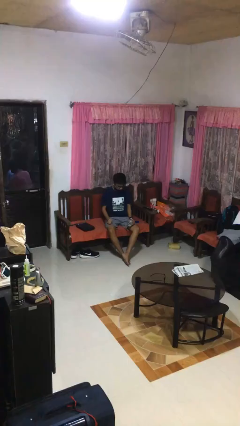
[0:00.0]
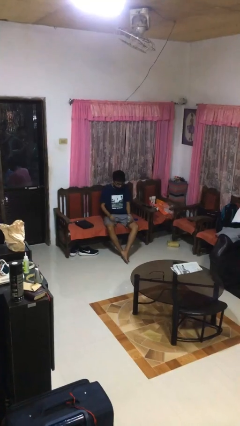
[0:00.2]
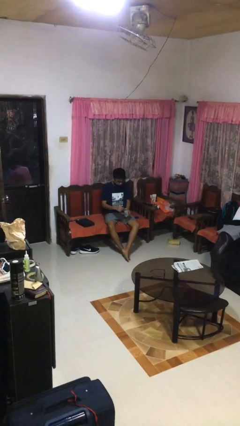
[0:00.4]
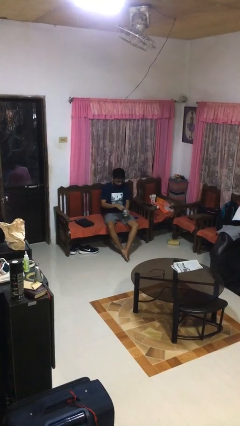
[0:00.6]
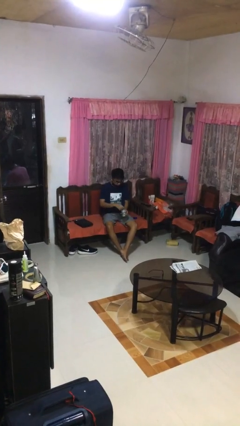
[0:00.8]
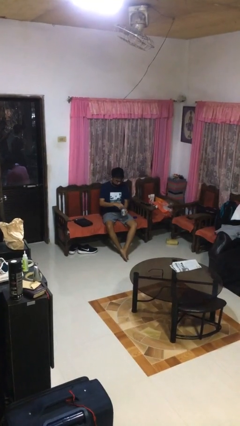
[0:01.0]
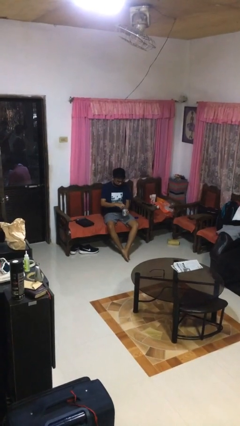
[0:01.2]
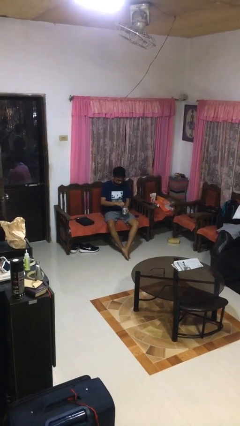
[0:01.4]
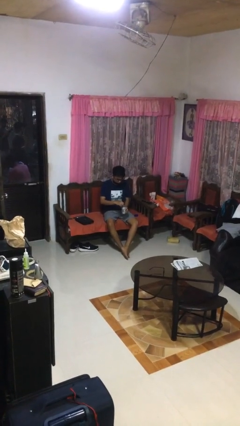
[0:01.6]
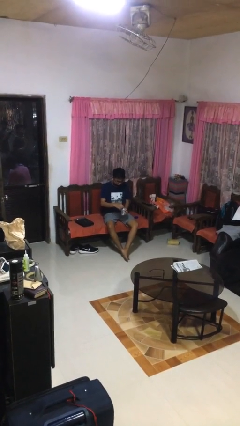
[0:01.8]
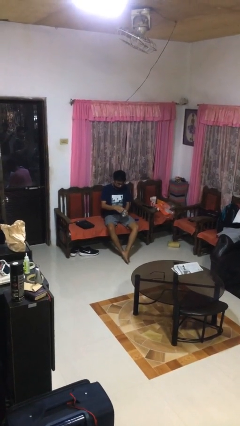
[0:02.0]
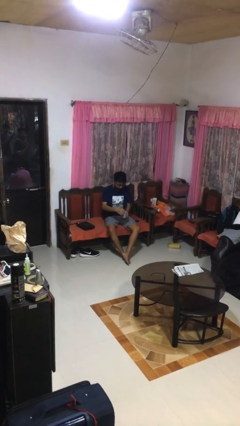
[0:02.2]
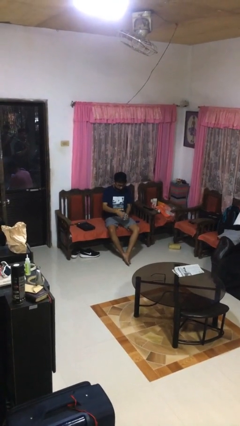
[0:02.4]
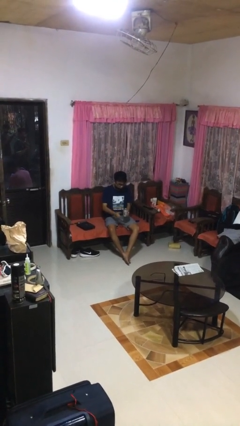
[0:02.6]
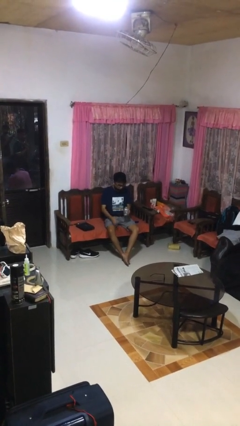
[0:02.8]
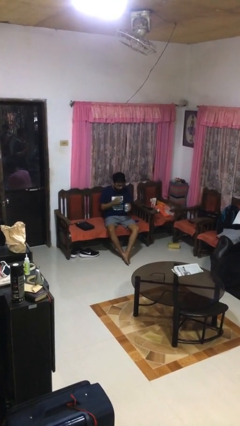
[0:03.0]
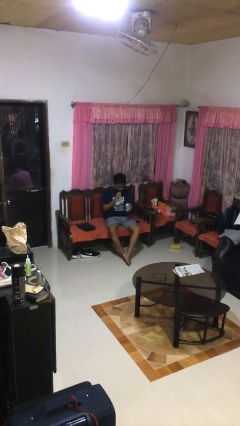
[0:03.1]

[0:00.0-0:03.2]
person opens beverage can

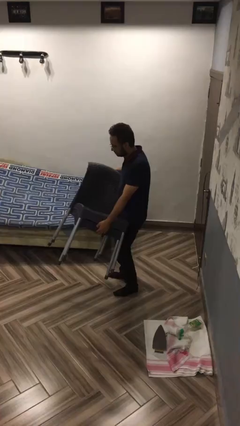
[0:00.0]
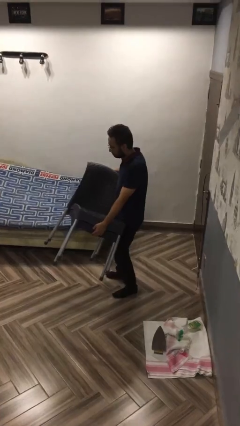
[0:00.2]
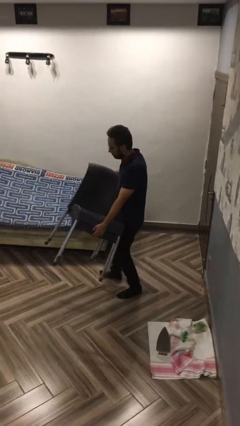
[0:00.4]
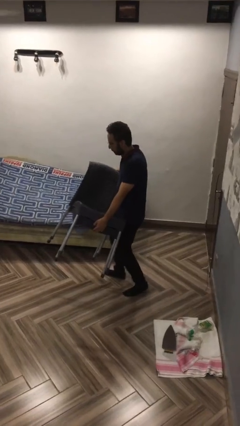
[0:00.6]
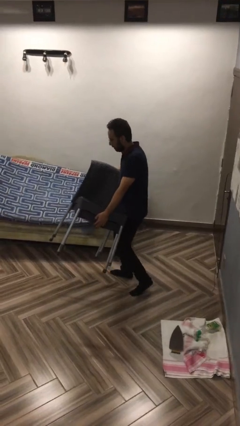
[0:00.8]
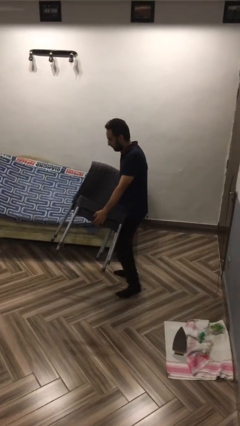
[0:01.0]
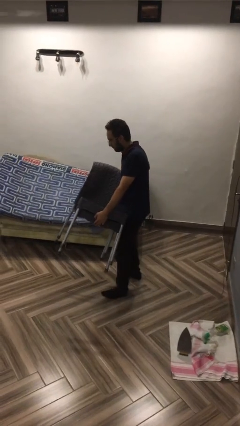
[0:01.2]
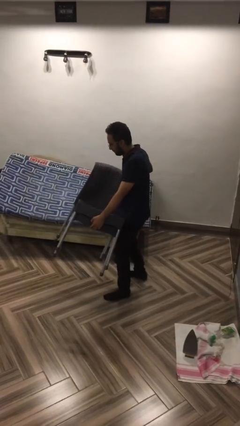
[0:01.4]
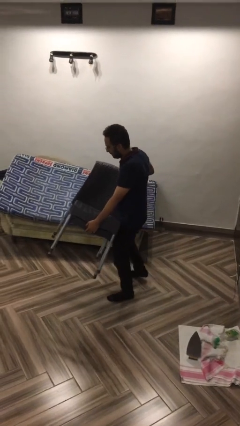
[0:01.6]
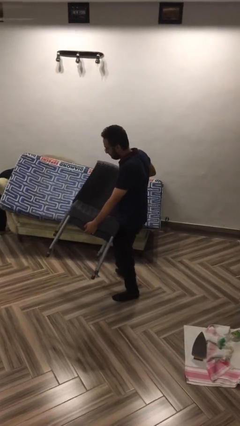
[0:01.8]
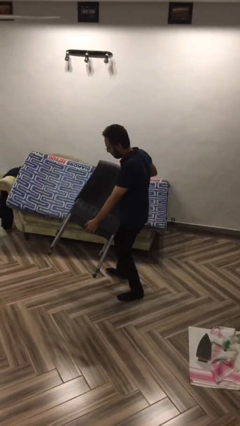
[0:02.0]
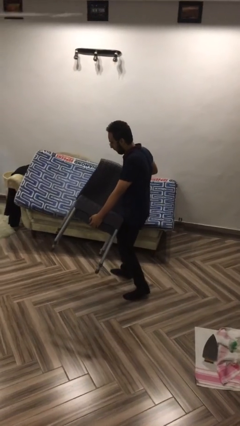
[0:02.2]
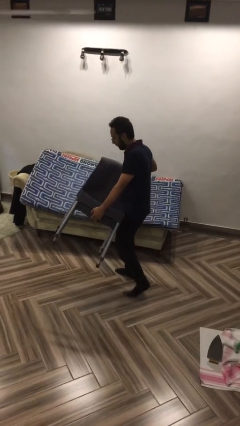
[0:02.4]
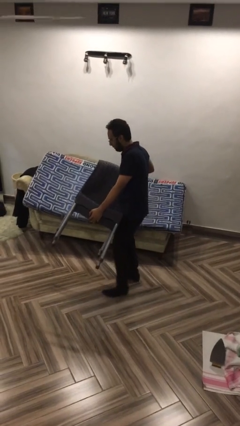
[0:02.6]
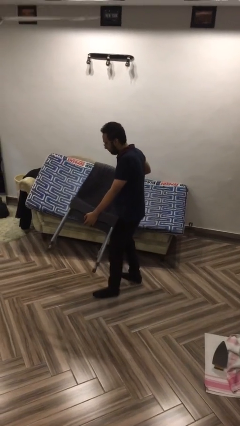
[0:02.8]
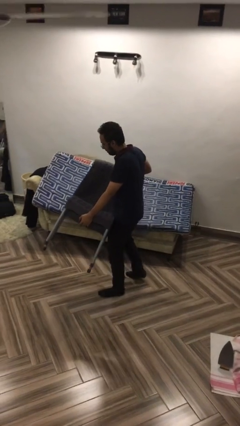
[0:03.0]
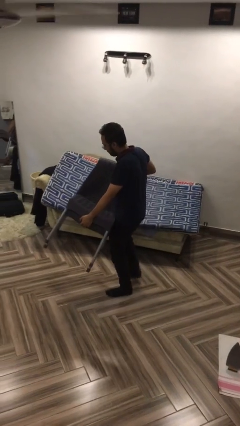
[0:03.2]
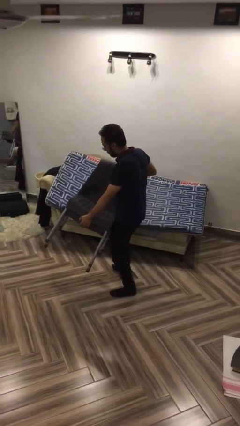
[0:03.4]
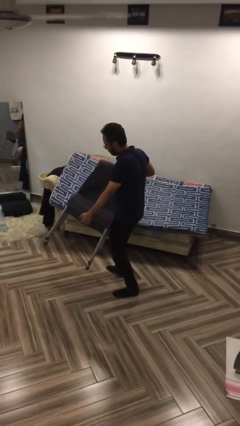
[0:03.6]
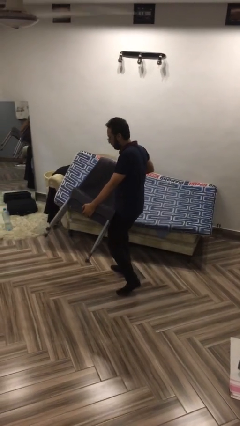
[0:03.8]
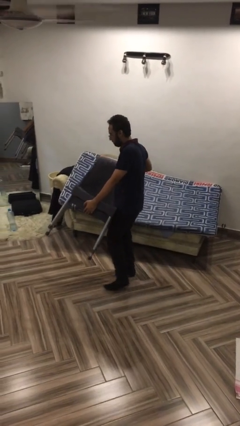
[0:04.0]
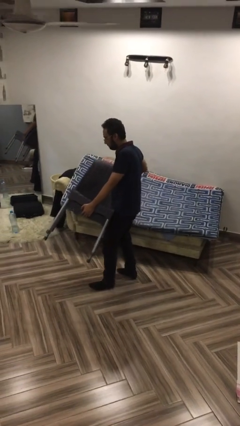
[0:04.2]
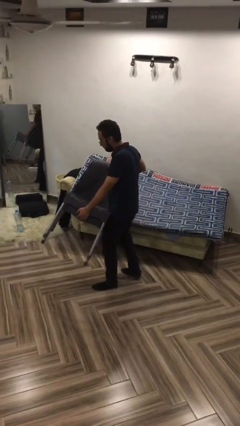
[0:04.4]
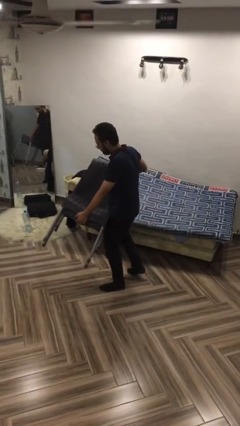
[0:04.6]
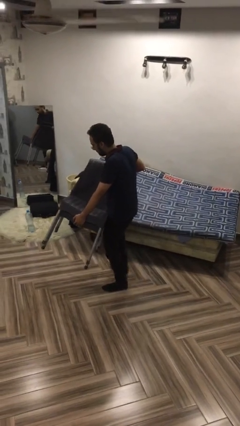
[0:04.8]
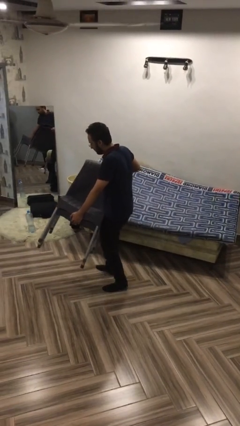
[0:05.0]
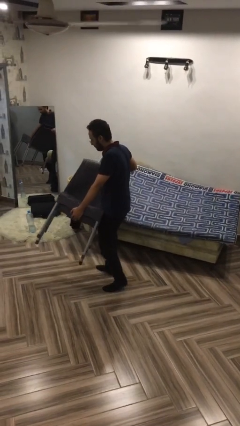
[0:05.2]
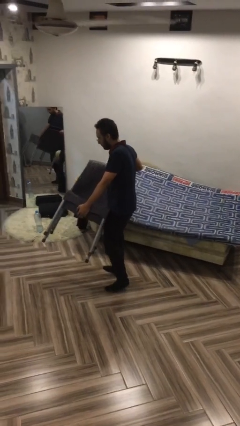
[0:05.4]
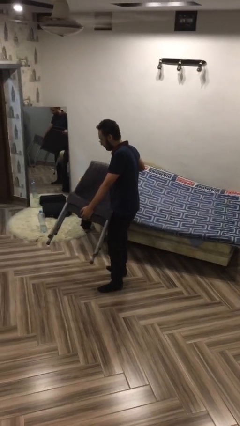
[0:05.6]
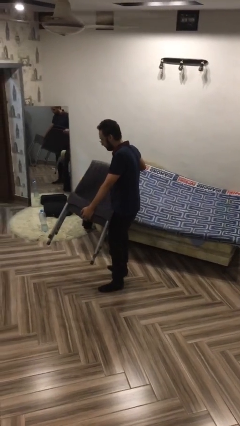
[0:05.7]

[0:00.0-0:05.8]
person carries heavy object

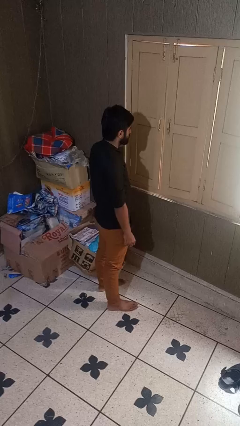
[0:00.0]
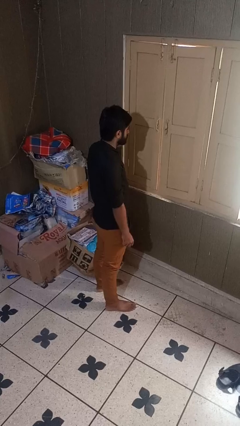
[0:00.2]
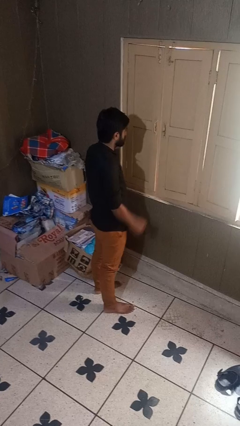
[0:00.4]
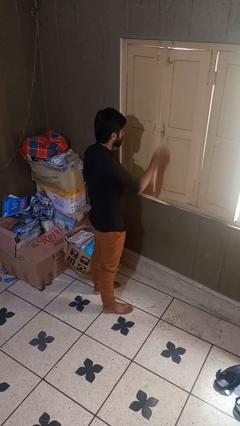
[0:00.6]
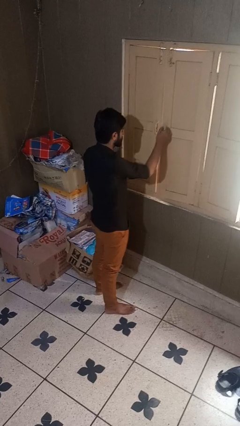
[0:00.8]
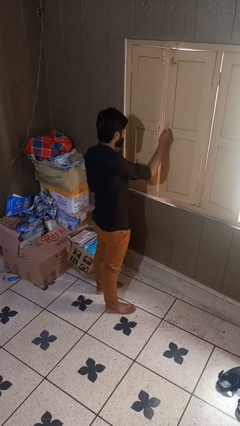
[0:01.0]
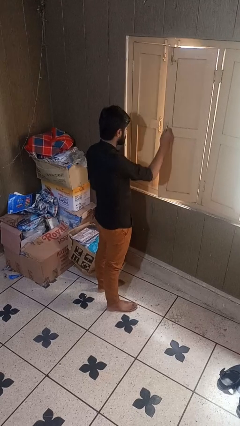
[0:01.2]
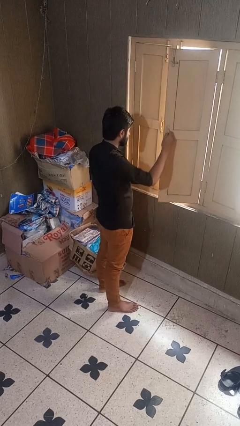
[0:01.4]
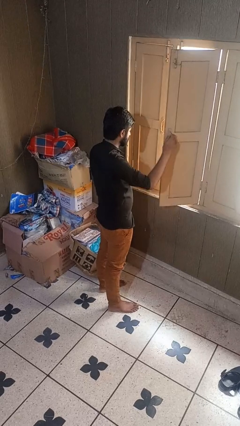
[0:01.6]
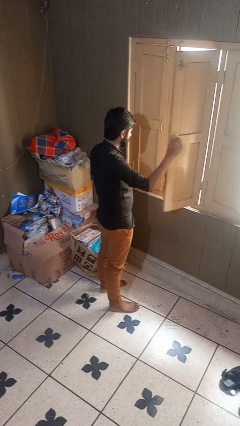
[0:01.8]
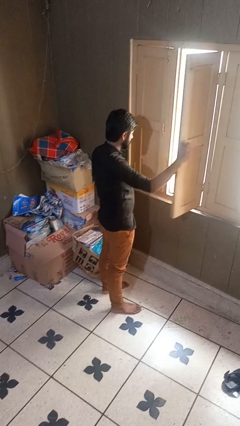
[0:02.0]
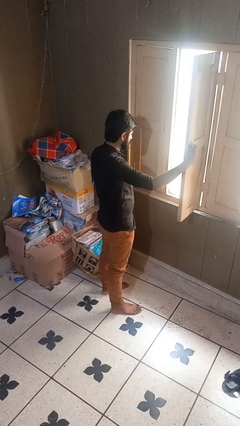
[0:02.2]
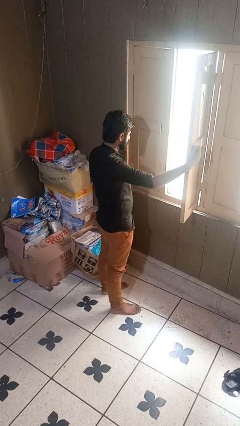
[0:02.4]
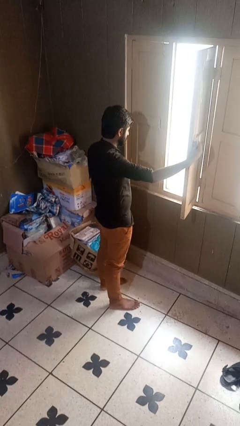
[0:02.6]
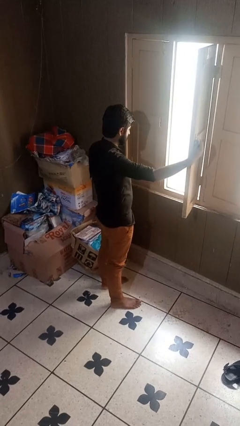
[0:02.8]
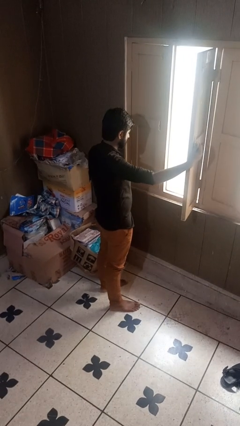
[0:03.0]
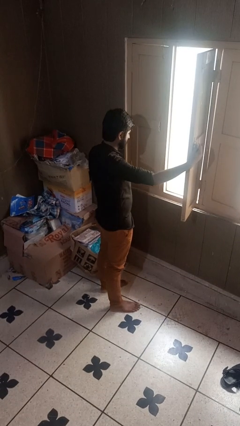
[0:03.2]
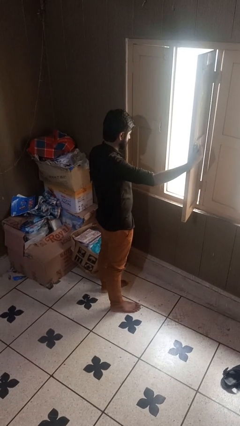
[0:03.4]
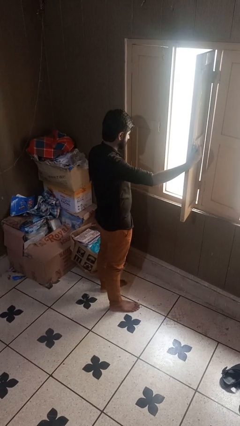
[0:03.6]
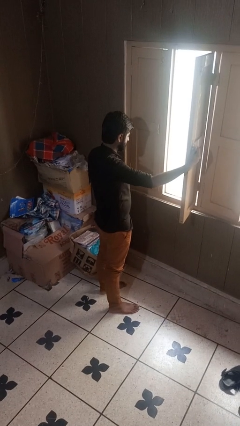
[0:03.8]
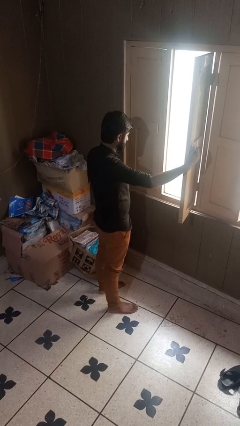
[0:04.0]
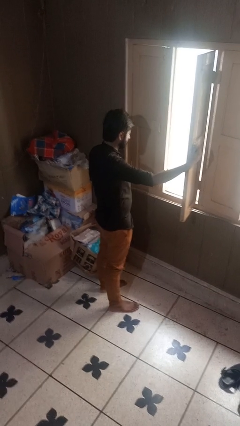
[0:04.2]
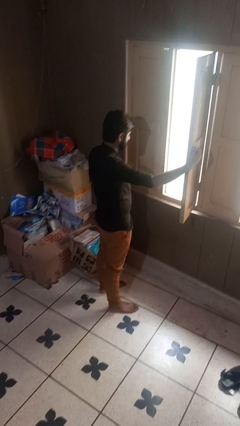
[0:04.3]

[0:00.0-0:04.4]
person opens home window

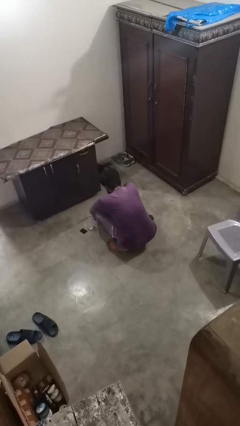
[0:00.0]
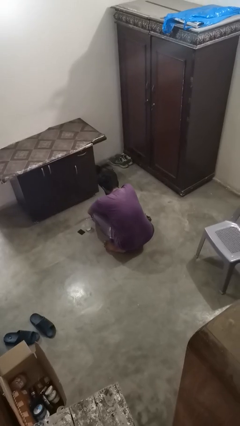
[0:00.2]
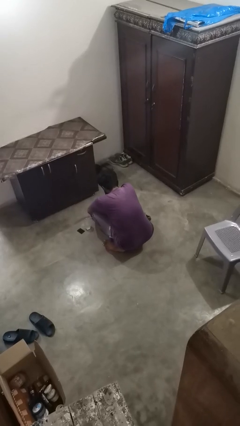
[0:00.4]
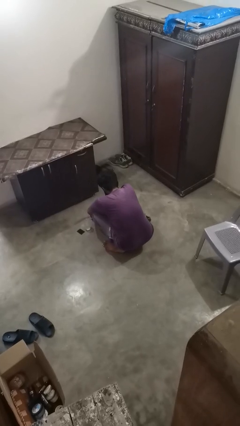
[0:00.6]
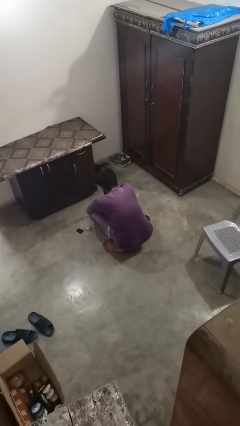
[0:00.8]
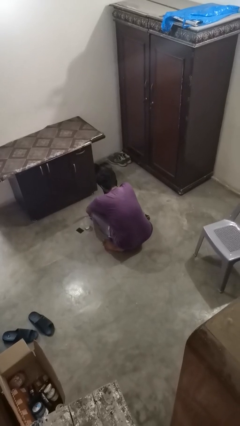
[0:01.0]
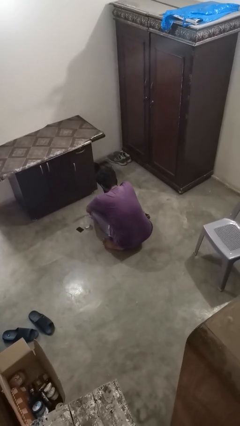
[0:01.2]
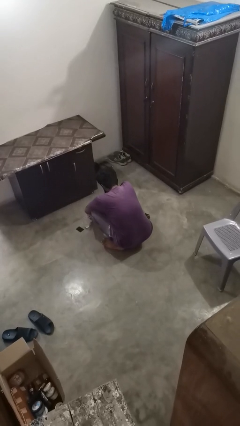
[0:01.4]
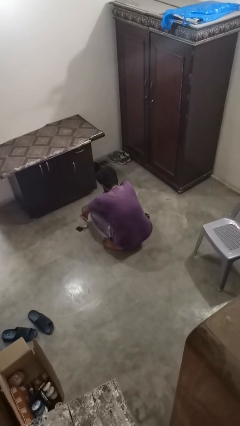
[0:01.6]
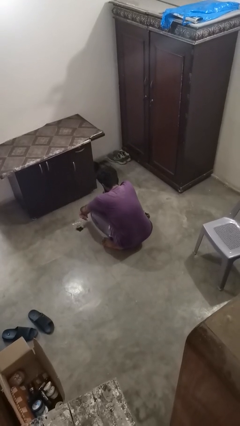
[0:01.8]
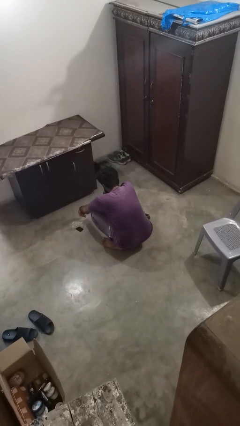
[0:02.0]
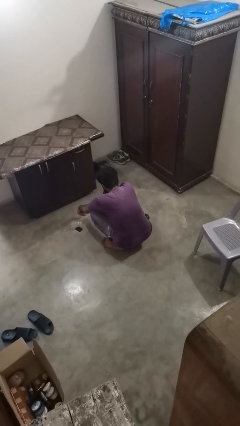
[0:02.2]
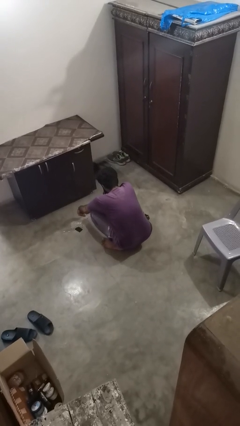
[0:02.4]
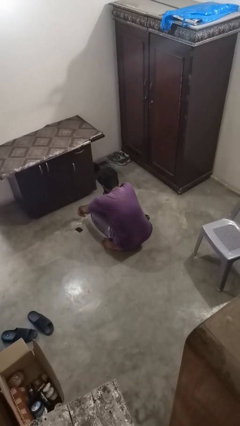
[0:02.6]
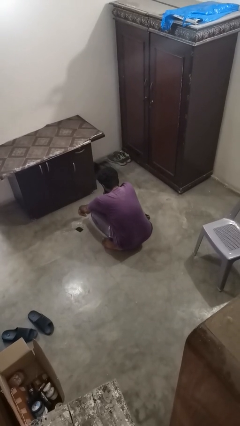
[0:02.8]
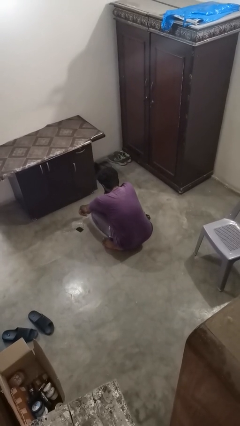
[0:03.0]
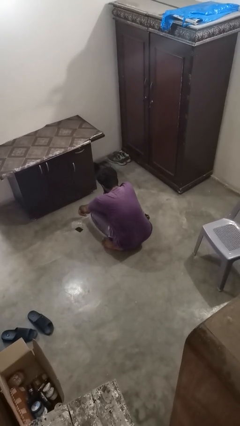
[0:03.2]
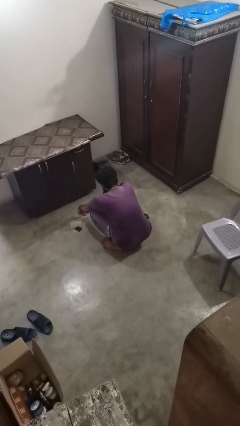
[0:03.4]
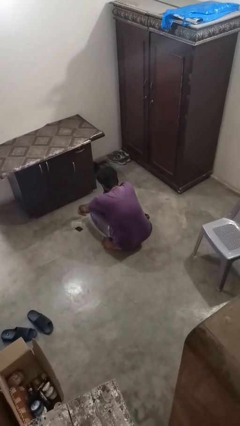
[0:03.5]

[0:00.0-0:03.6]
person spills on floor

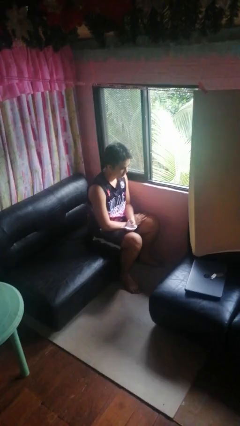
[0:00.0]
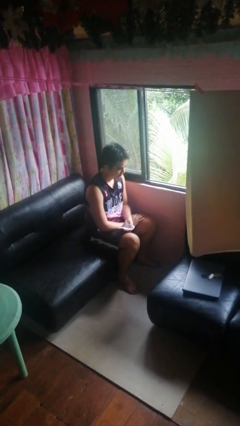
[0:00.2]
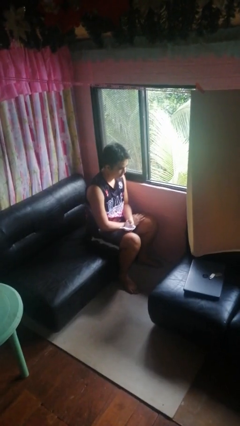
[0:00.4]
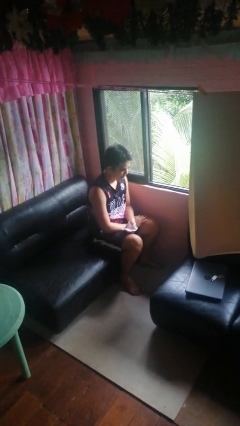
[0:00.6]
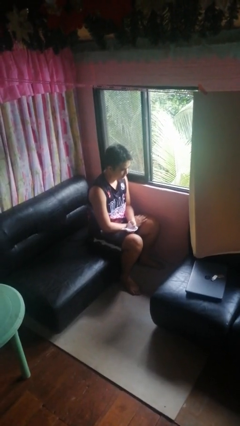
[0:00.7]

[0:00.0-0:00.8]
person blows nose
